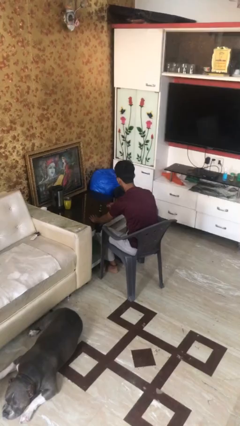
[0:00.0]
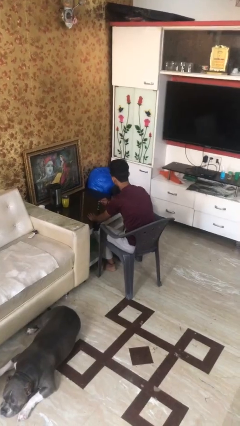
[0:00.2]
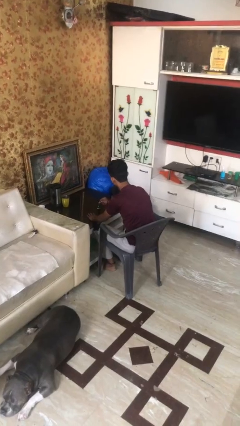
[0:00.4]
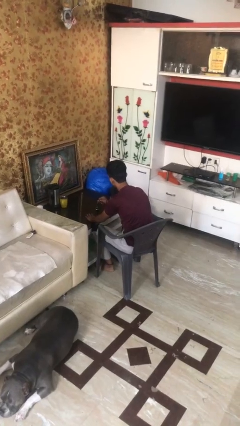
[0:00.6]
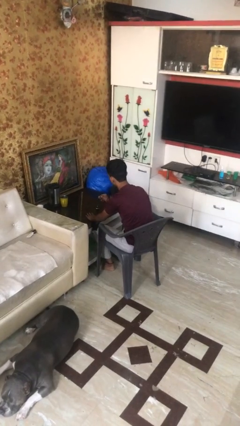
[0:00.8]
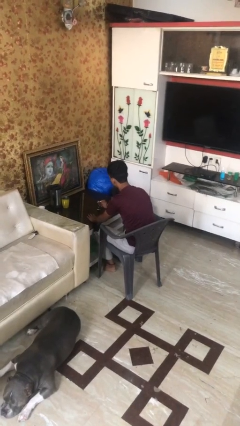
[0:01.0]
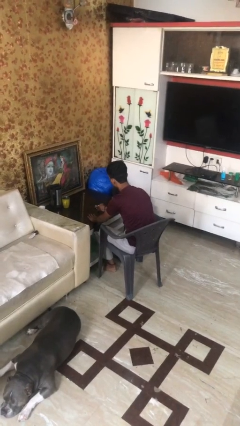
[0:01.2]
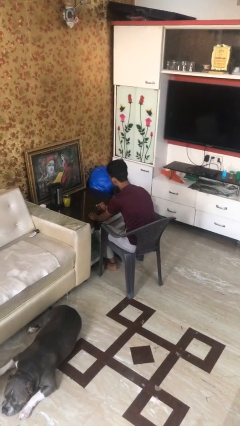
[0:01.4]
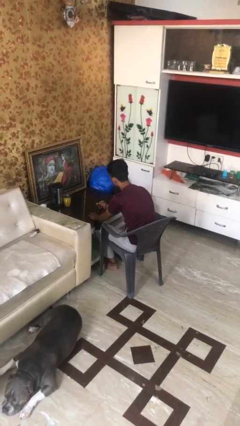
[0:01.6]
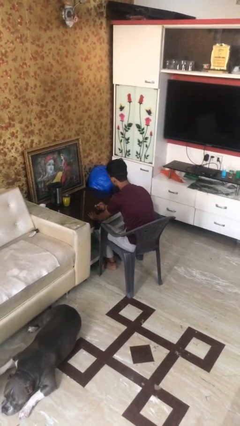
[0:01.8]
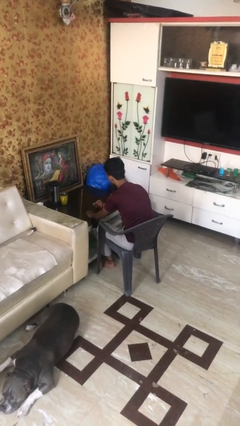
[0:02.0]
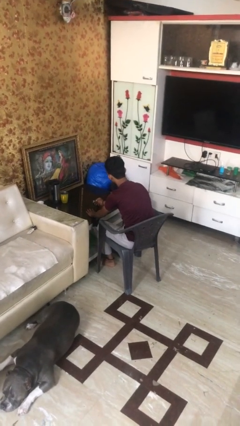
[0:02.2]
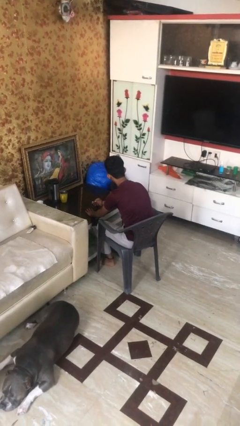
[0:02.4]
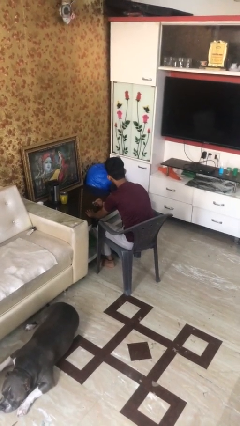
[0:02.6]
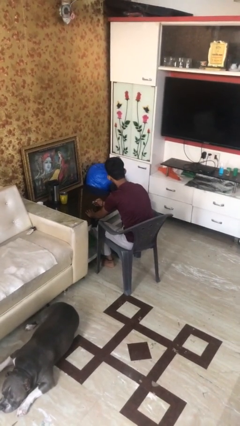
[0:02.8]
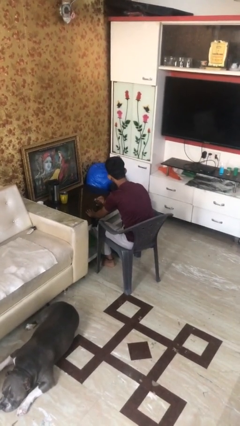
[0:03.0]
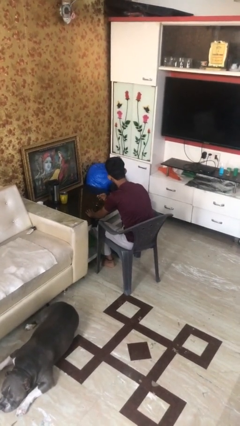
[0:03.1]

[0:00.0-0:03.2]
person paints fingernails

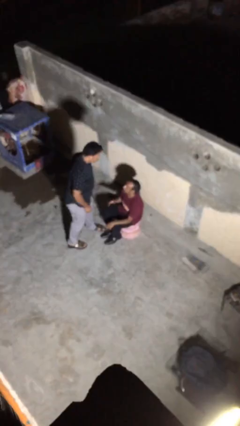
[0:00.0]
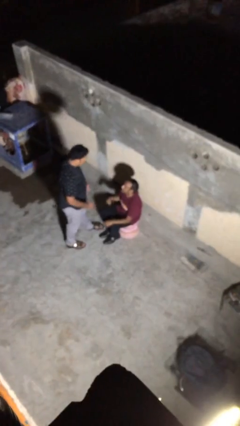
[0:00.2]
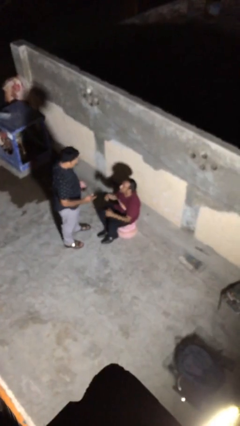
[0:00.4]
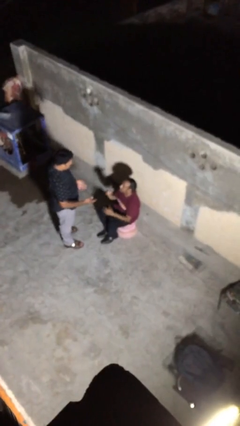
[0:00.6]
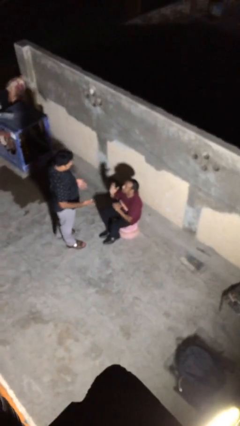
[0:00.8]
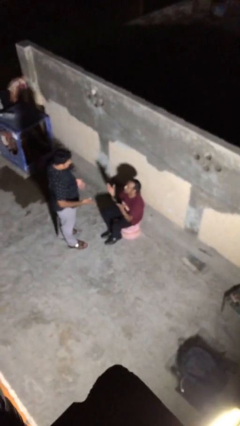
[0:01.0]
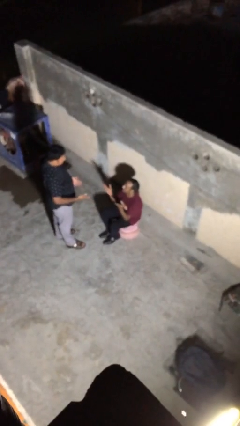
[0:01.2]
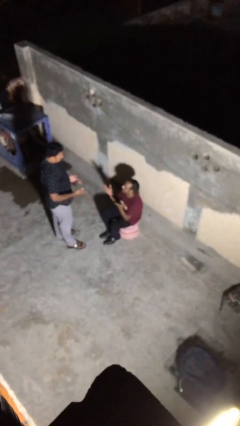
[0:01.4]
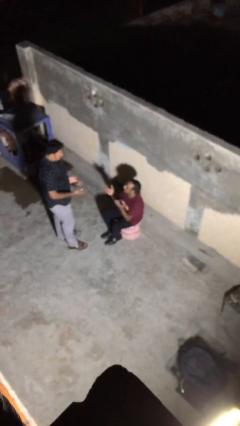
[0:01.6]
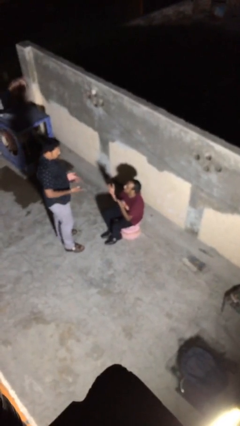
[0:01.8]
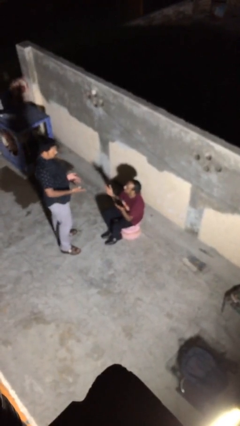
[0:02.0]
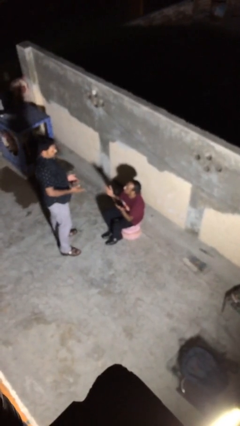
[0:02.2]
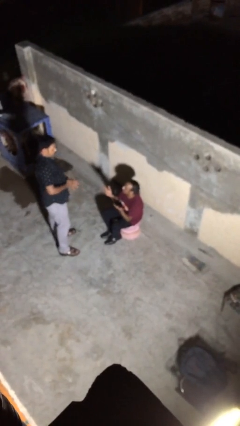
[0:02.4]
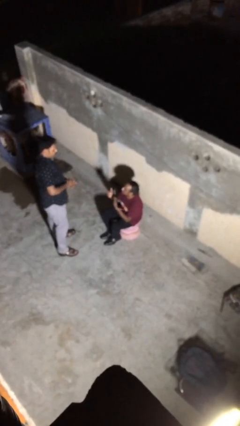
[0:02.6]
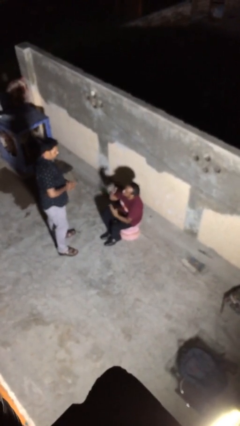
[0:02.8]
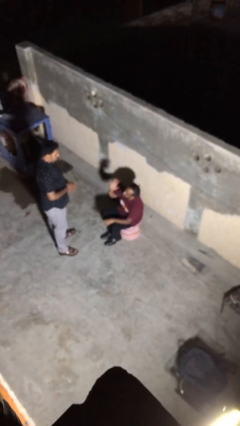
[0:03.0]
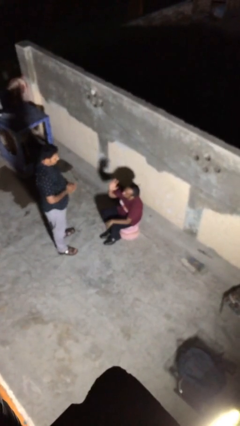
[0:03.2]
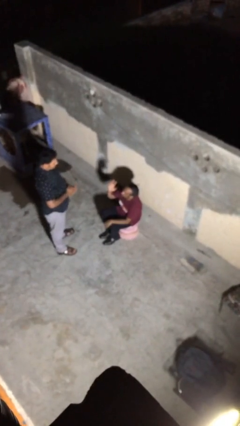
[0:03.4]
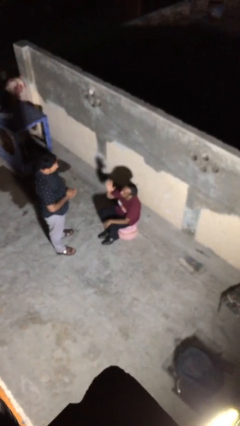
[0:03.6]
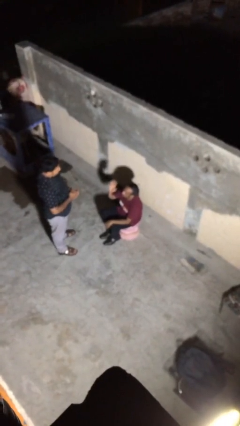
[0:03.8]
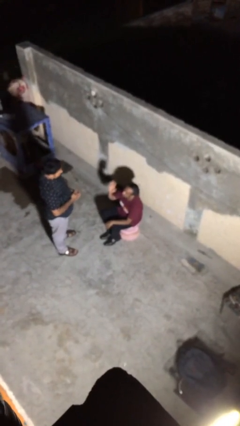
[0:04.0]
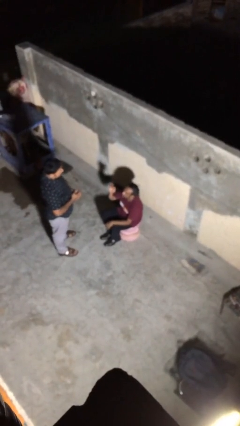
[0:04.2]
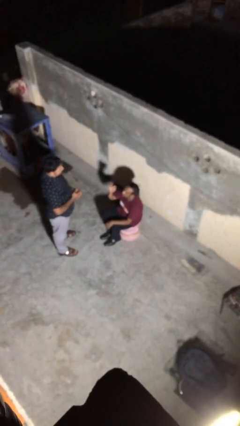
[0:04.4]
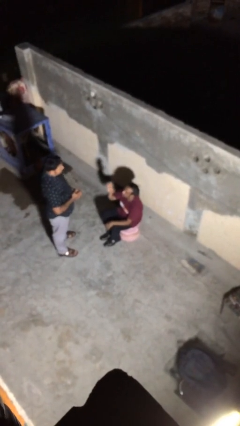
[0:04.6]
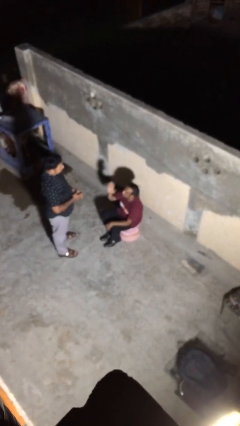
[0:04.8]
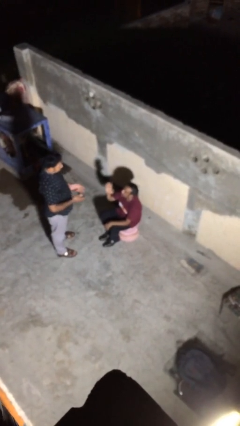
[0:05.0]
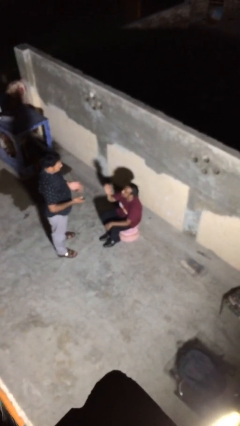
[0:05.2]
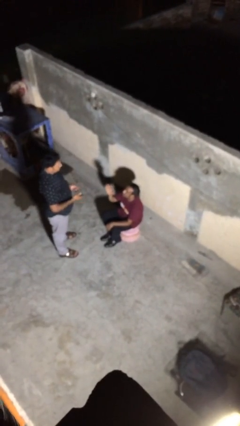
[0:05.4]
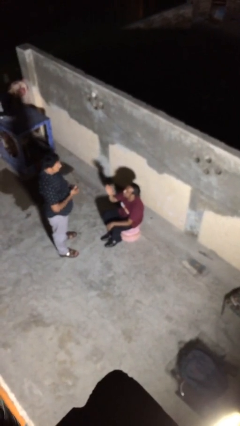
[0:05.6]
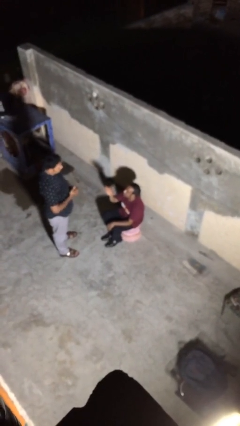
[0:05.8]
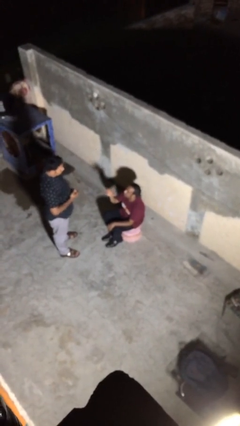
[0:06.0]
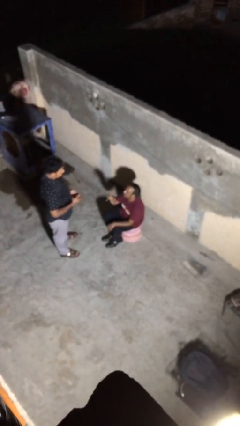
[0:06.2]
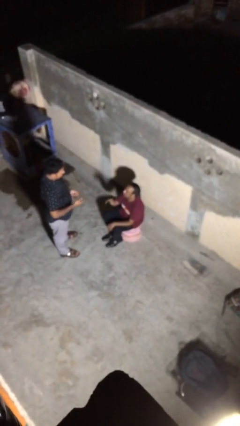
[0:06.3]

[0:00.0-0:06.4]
person talks to person

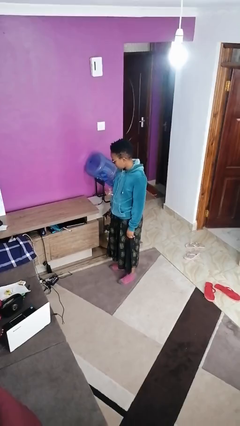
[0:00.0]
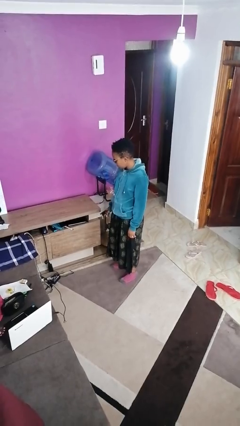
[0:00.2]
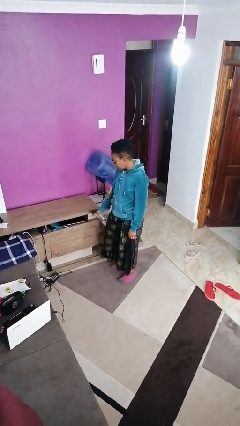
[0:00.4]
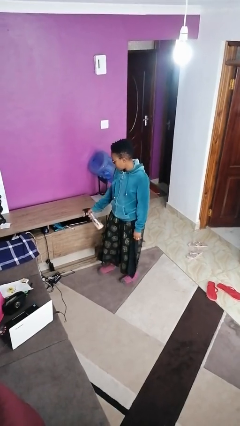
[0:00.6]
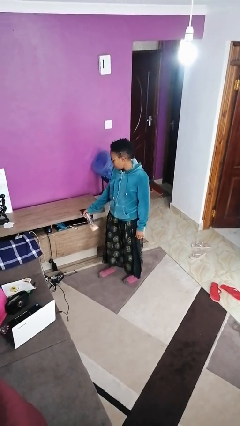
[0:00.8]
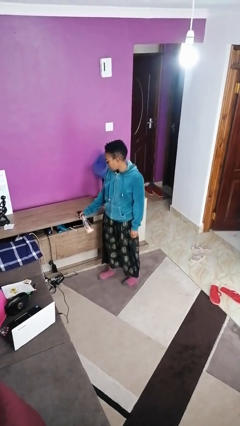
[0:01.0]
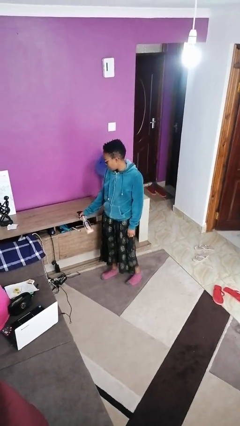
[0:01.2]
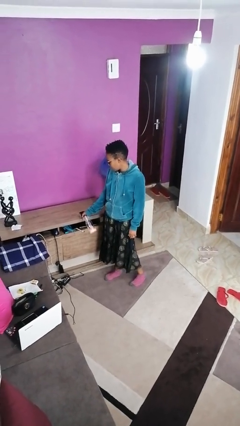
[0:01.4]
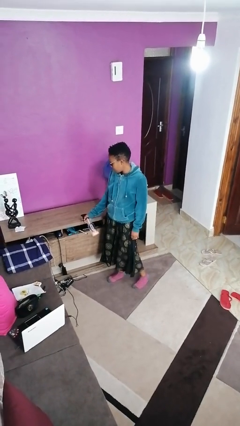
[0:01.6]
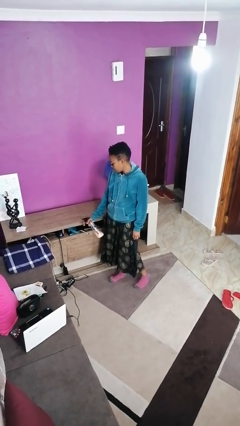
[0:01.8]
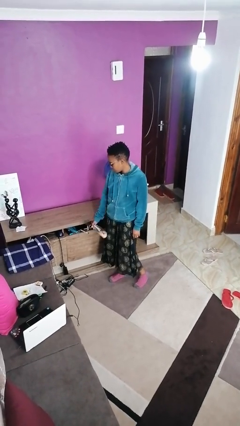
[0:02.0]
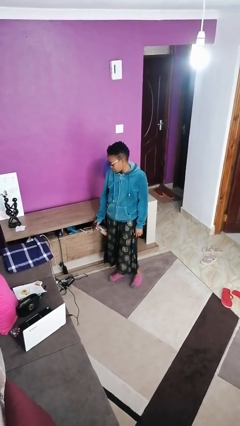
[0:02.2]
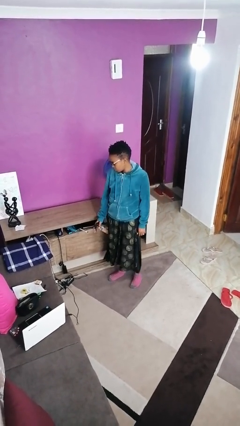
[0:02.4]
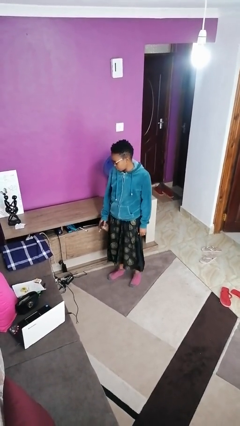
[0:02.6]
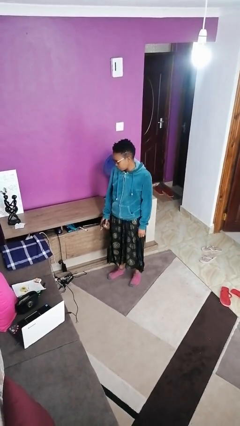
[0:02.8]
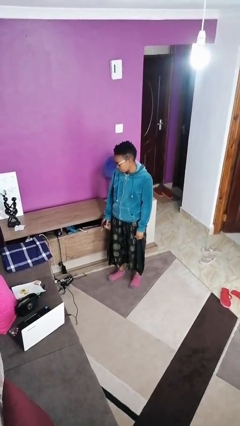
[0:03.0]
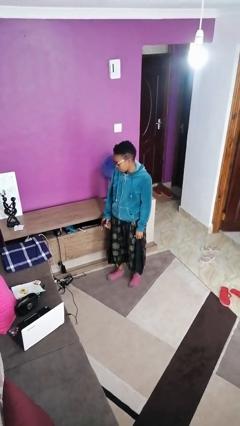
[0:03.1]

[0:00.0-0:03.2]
person sprays from bottle

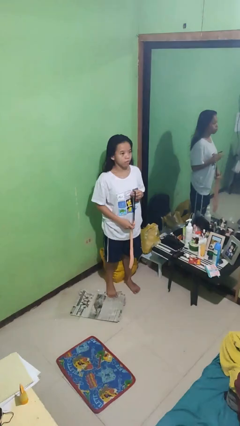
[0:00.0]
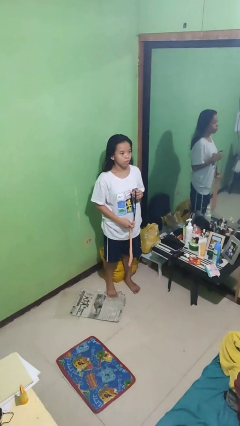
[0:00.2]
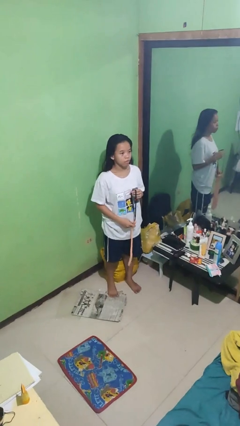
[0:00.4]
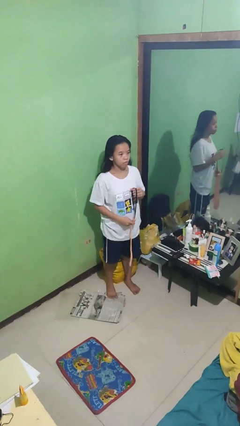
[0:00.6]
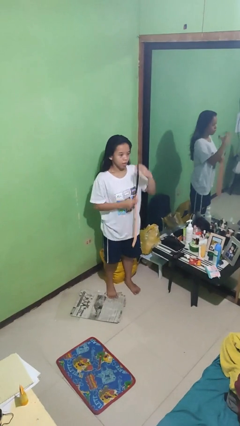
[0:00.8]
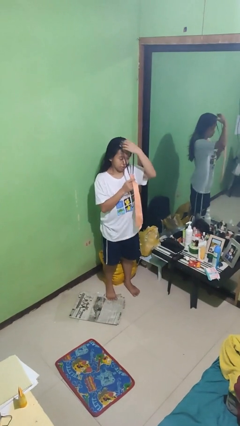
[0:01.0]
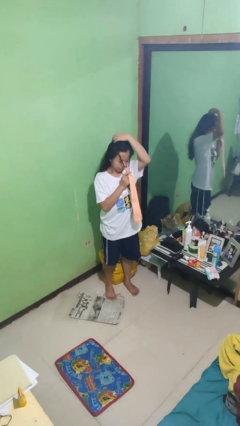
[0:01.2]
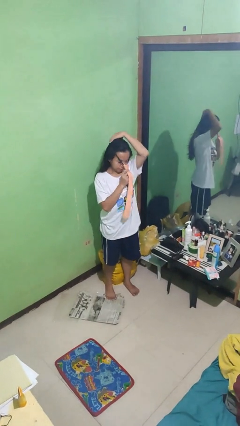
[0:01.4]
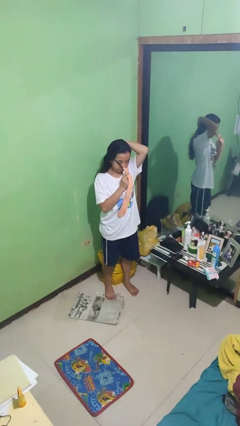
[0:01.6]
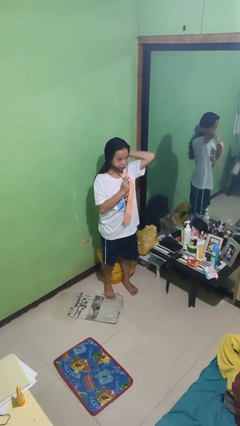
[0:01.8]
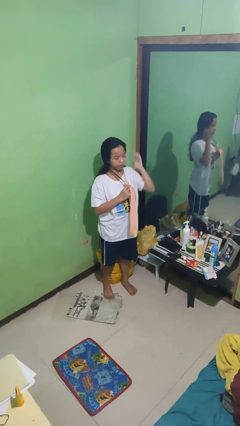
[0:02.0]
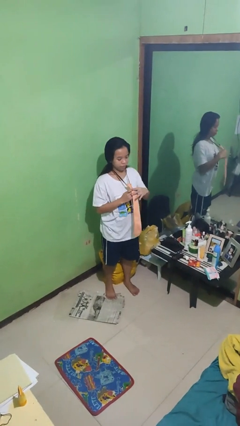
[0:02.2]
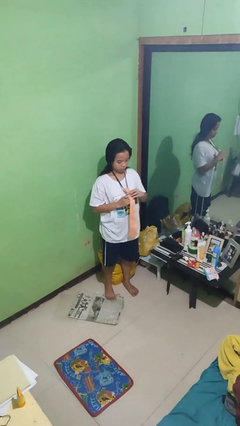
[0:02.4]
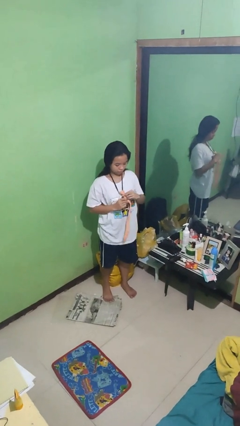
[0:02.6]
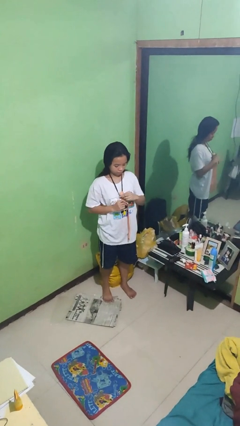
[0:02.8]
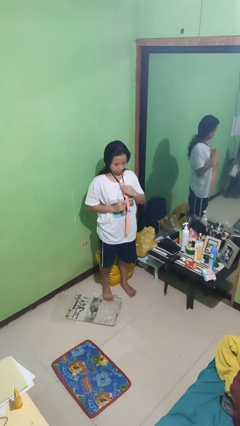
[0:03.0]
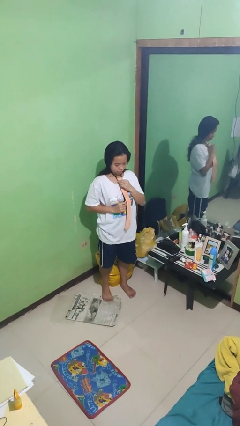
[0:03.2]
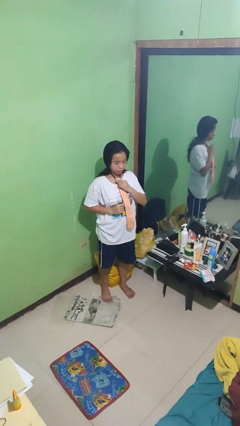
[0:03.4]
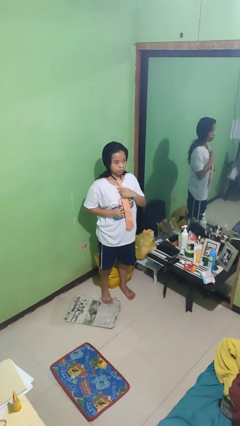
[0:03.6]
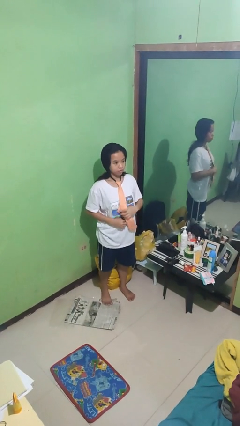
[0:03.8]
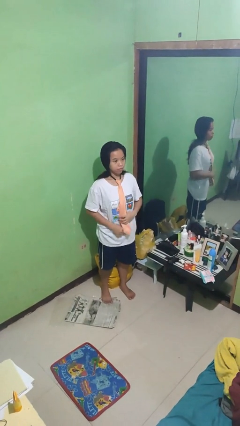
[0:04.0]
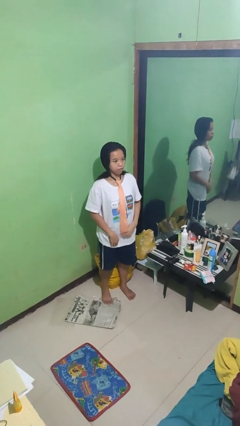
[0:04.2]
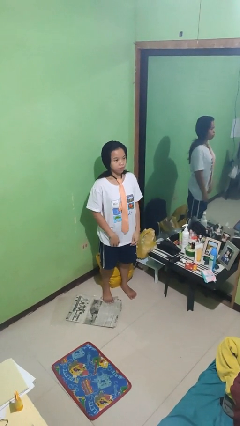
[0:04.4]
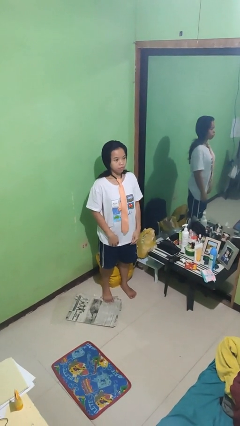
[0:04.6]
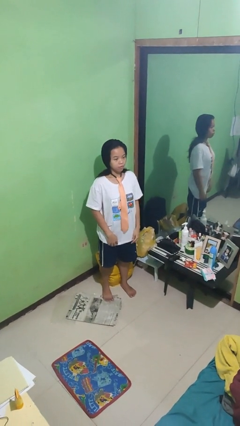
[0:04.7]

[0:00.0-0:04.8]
person puts on necktie

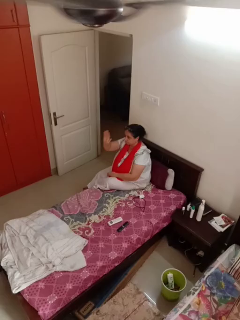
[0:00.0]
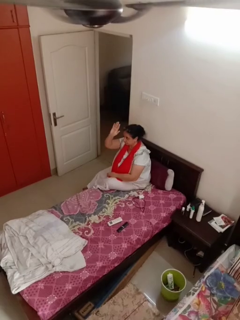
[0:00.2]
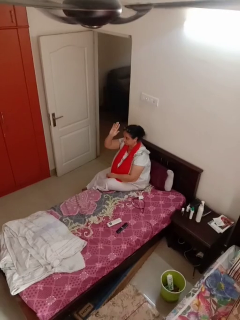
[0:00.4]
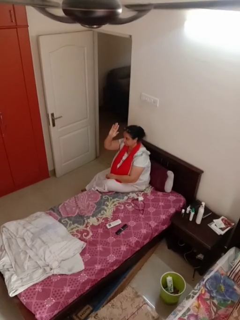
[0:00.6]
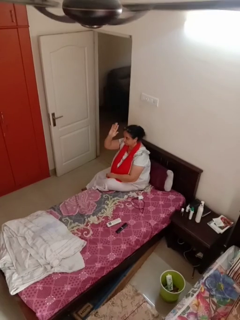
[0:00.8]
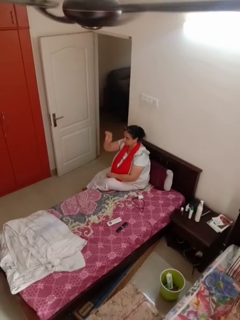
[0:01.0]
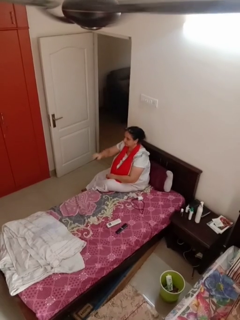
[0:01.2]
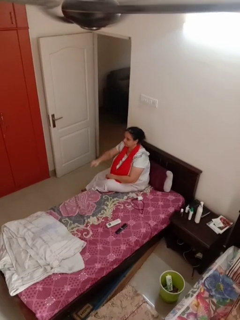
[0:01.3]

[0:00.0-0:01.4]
person gestures raise hand
